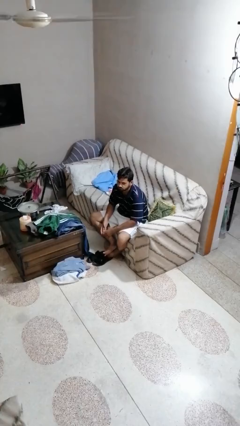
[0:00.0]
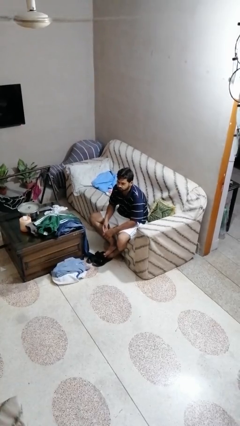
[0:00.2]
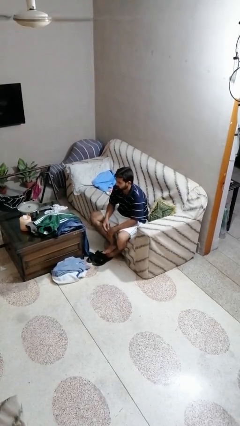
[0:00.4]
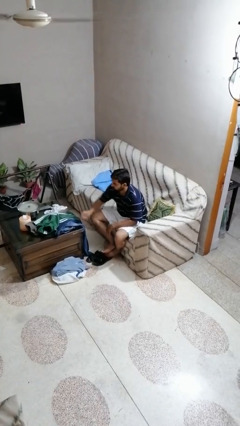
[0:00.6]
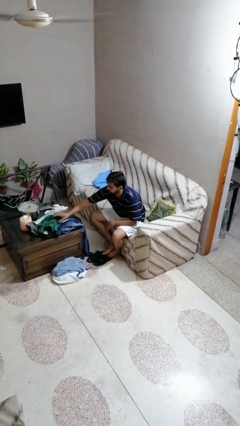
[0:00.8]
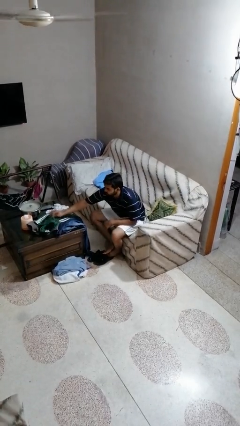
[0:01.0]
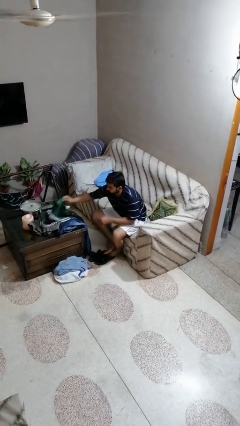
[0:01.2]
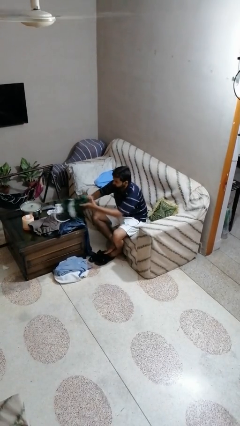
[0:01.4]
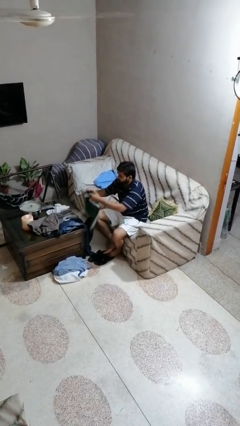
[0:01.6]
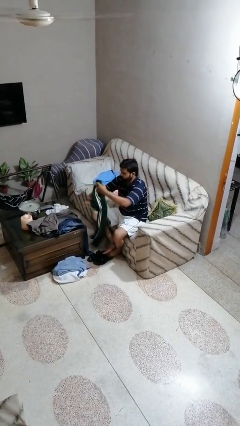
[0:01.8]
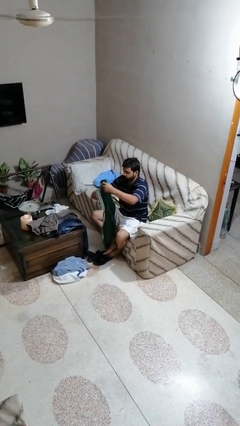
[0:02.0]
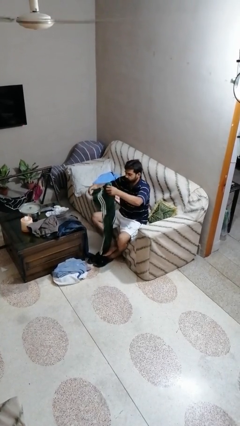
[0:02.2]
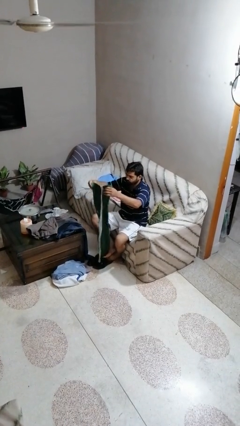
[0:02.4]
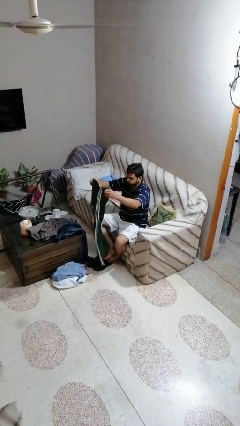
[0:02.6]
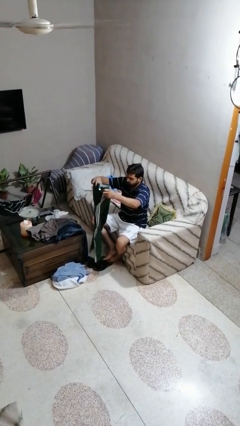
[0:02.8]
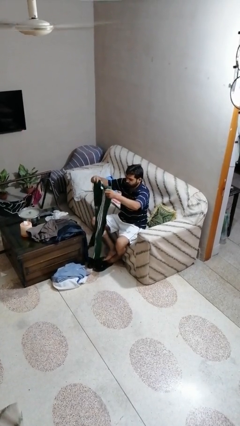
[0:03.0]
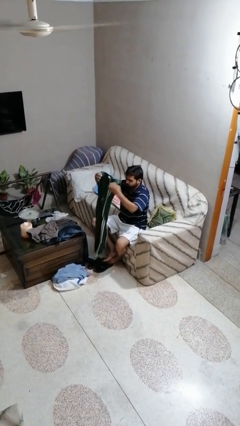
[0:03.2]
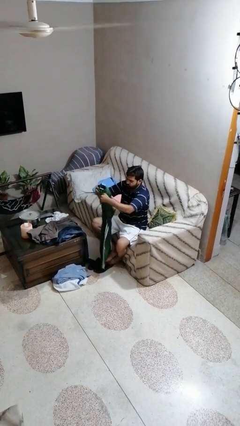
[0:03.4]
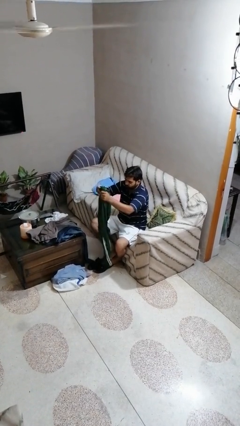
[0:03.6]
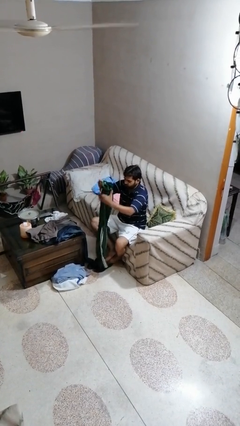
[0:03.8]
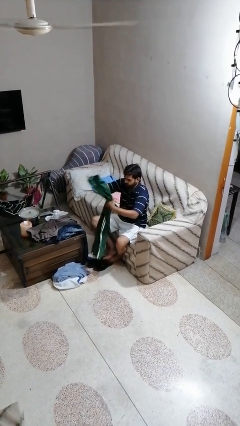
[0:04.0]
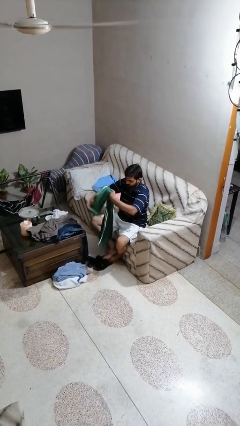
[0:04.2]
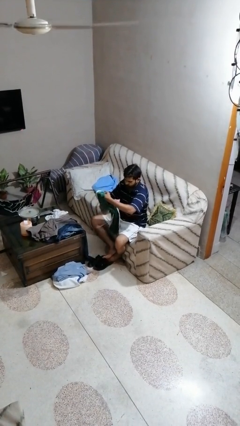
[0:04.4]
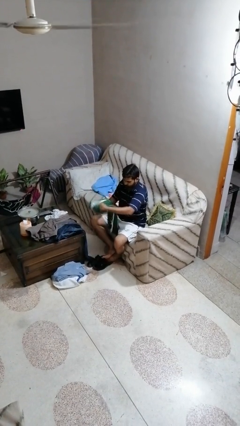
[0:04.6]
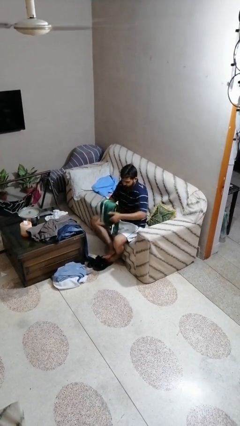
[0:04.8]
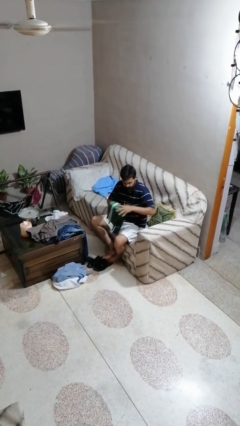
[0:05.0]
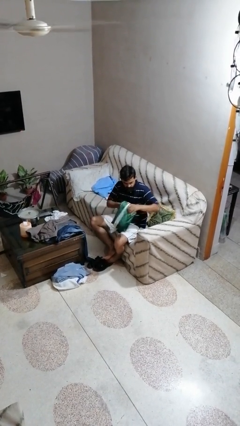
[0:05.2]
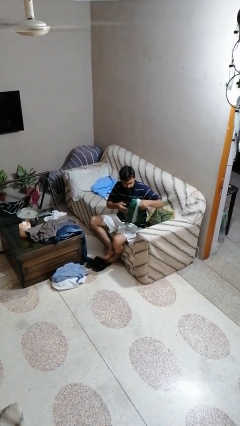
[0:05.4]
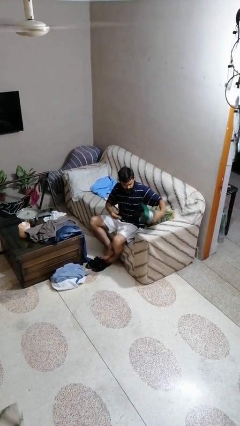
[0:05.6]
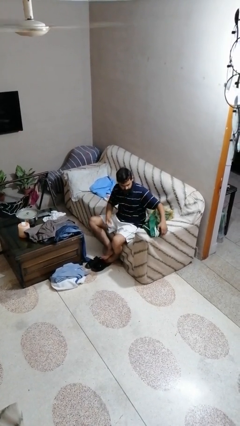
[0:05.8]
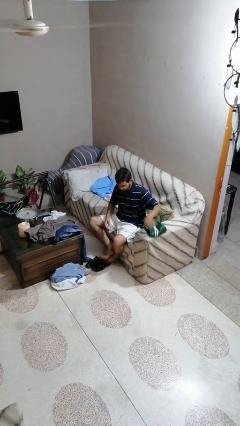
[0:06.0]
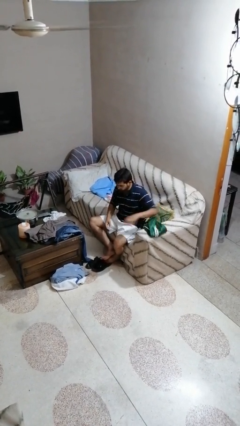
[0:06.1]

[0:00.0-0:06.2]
person folds pants

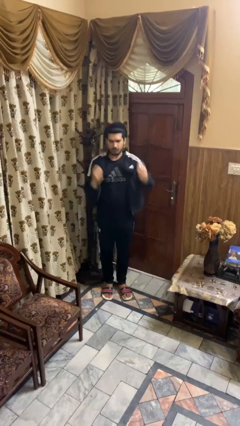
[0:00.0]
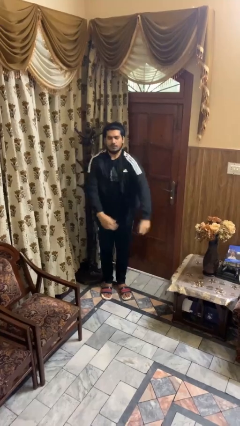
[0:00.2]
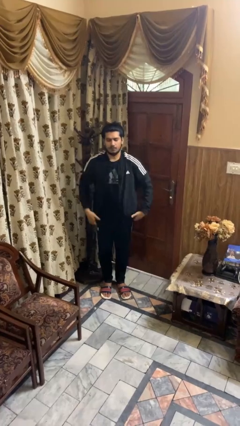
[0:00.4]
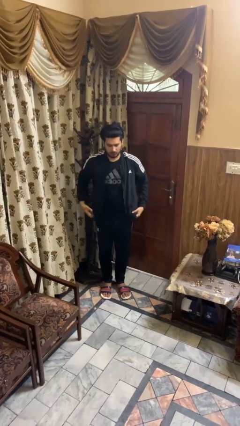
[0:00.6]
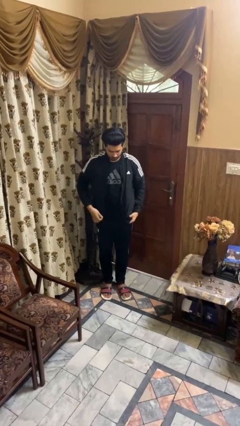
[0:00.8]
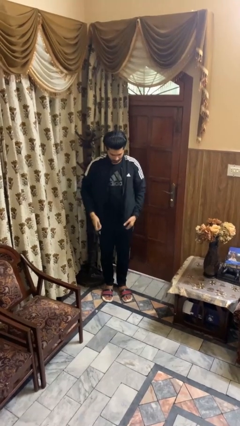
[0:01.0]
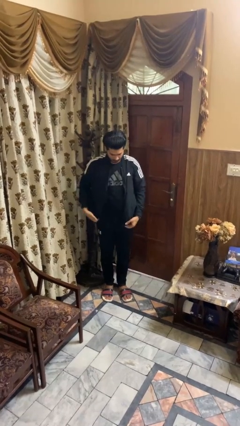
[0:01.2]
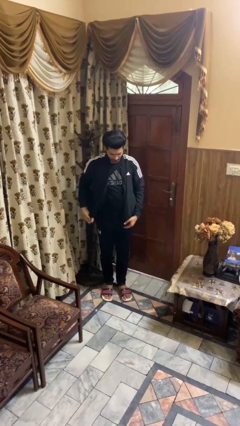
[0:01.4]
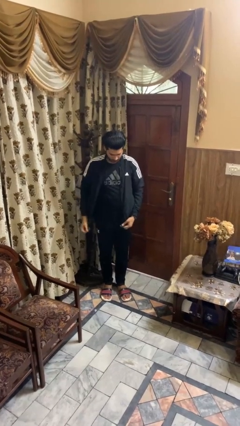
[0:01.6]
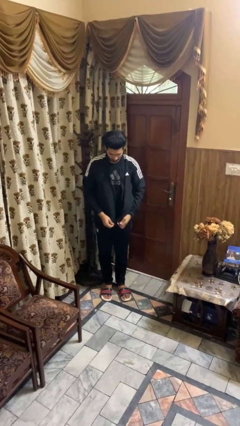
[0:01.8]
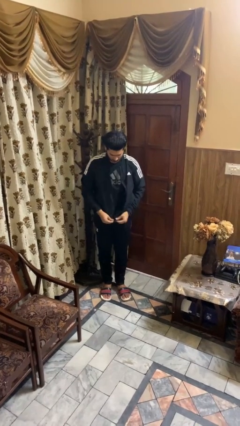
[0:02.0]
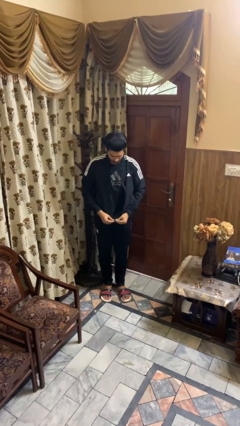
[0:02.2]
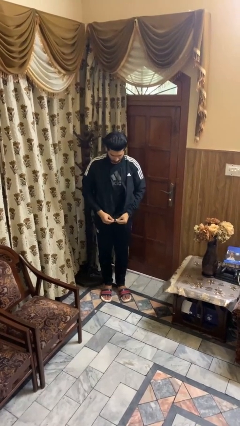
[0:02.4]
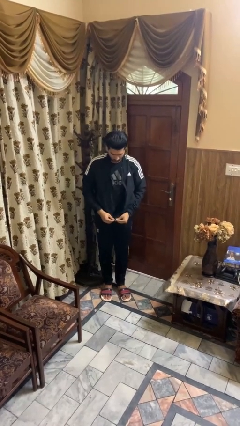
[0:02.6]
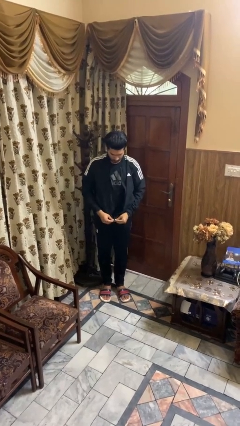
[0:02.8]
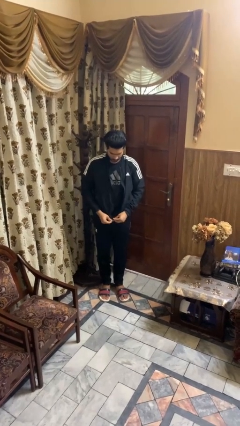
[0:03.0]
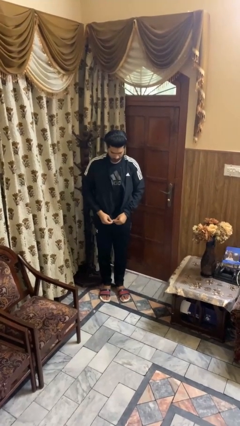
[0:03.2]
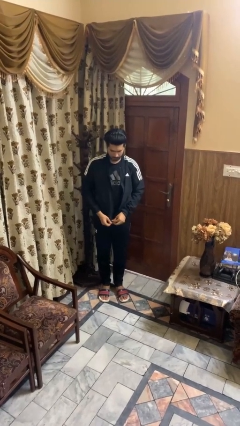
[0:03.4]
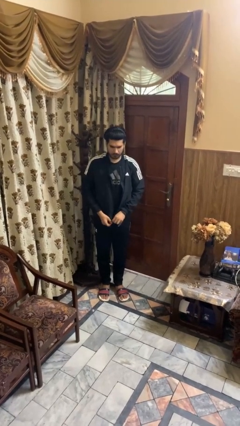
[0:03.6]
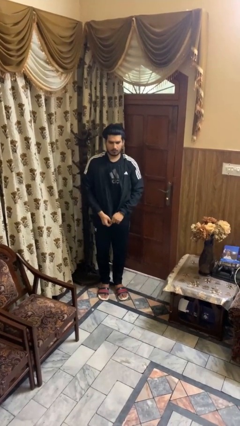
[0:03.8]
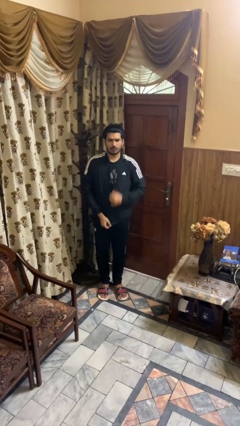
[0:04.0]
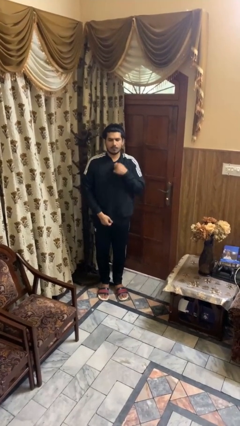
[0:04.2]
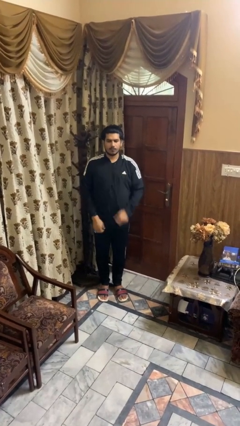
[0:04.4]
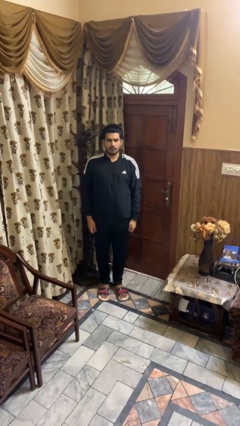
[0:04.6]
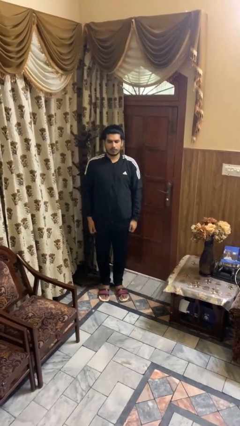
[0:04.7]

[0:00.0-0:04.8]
person zips up jacket

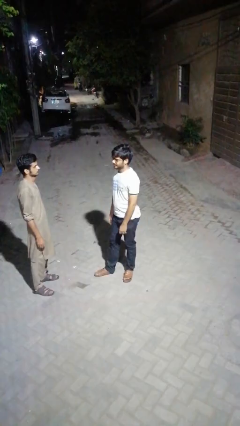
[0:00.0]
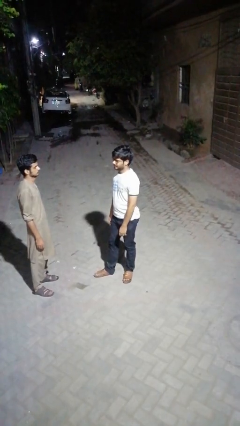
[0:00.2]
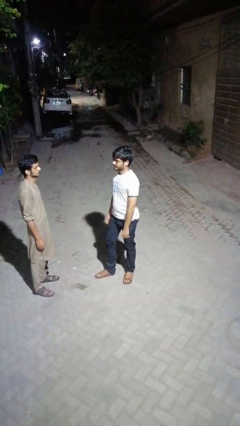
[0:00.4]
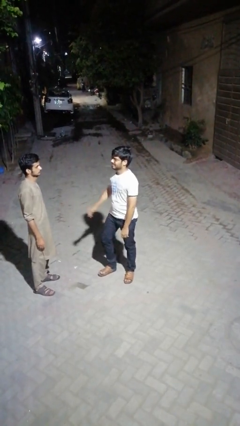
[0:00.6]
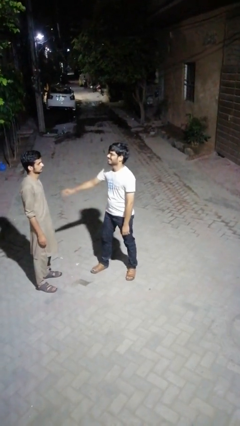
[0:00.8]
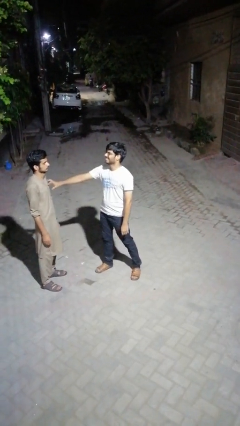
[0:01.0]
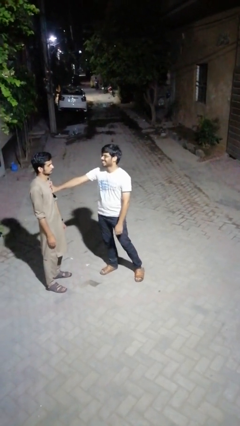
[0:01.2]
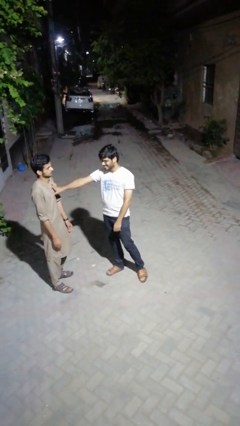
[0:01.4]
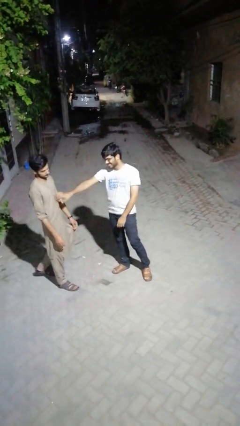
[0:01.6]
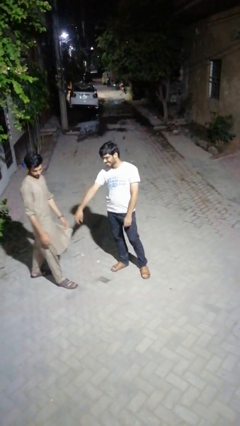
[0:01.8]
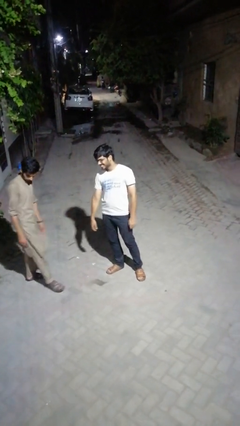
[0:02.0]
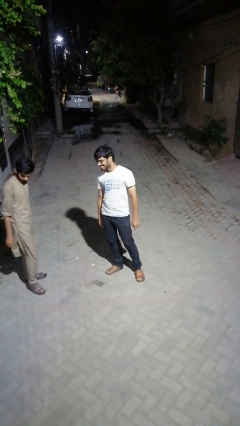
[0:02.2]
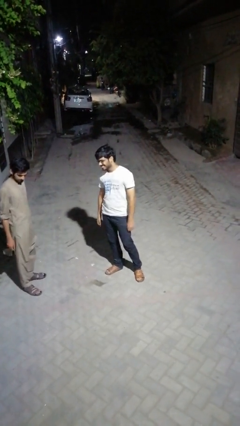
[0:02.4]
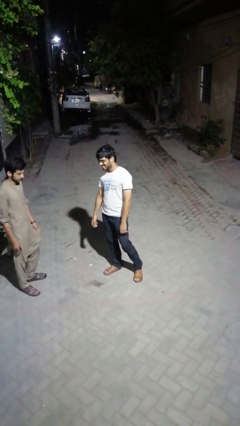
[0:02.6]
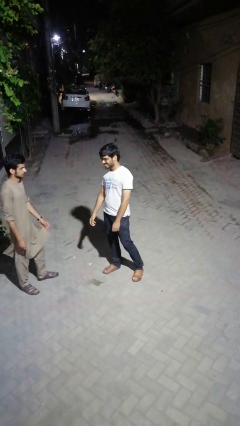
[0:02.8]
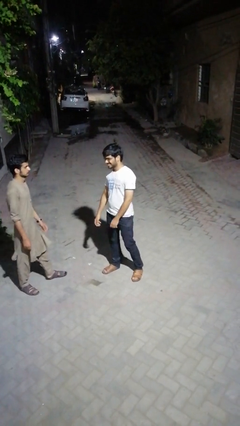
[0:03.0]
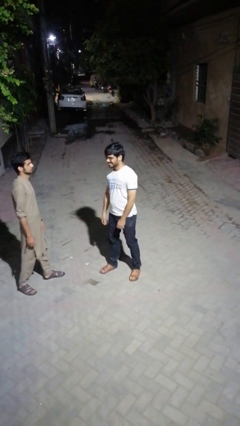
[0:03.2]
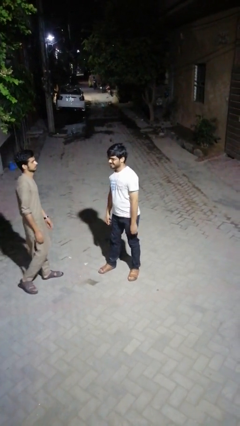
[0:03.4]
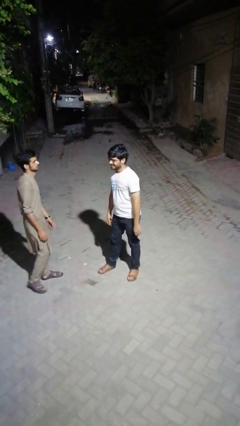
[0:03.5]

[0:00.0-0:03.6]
person shoves person

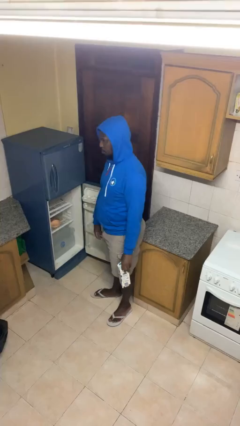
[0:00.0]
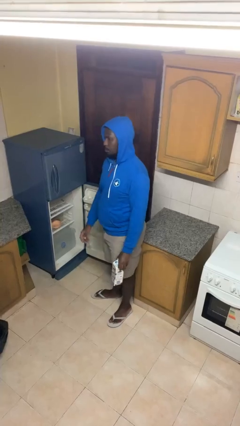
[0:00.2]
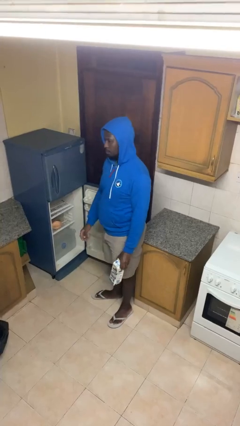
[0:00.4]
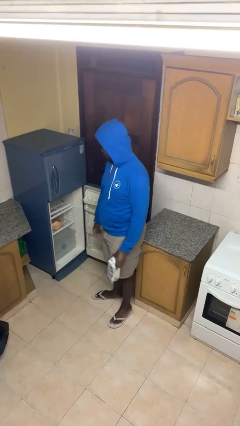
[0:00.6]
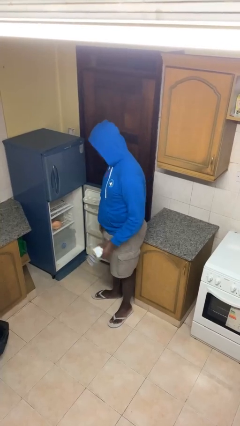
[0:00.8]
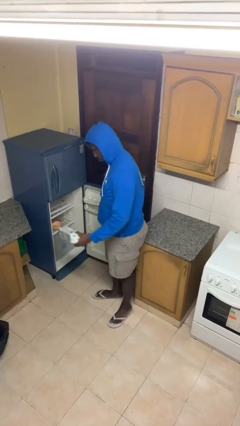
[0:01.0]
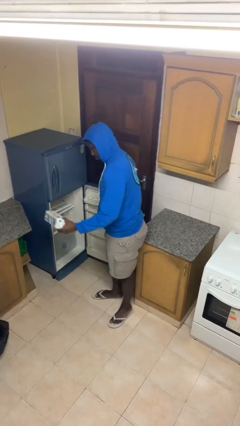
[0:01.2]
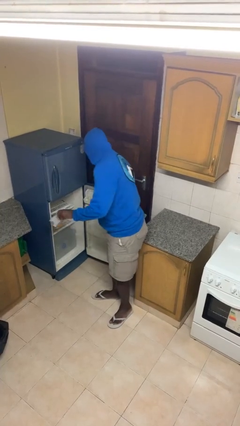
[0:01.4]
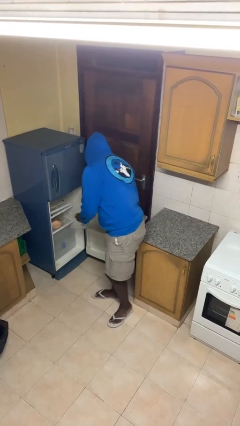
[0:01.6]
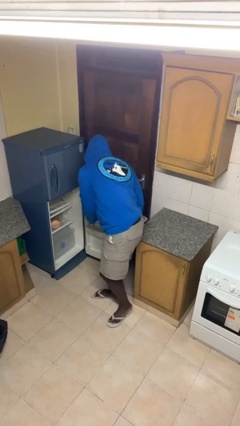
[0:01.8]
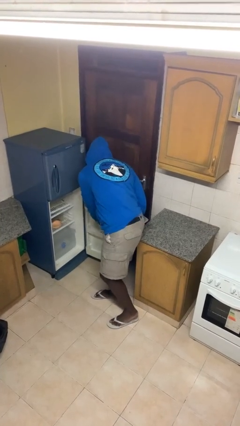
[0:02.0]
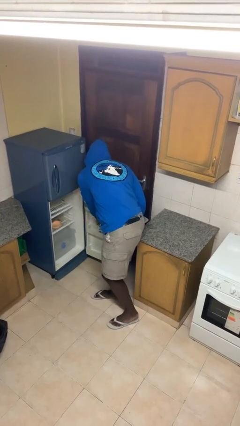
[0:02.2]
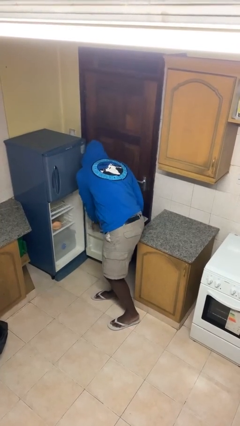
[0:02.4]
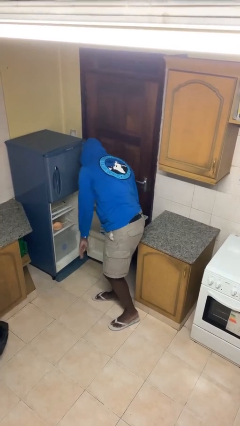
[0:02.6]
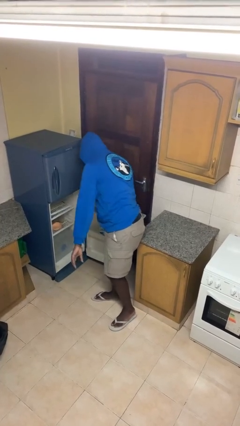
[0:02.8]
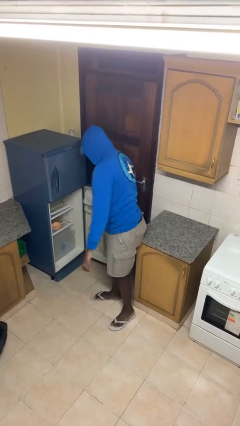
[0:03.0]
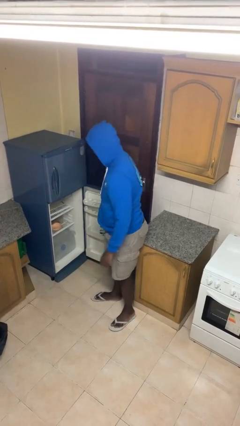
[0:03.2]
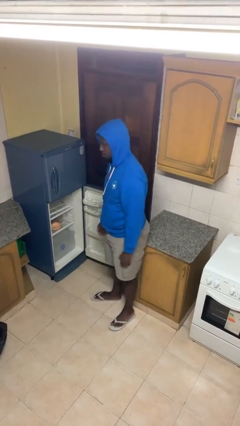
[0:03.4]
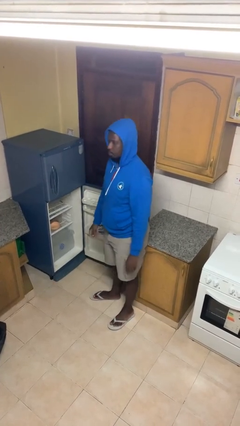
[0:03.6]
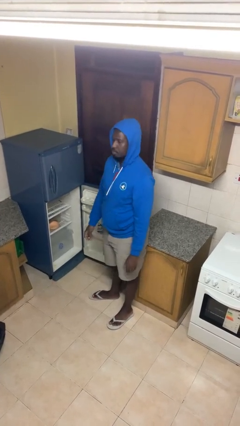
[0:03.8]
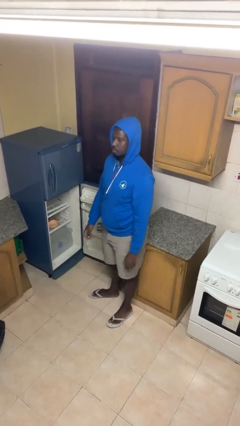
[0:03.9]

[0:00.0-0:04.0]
person puts object into refrigerator
